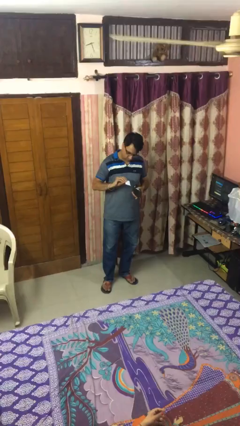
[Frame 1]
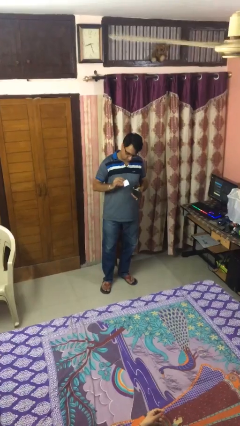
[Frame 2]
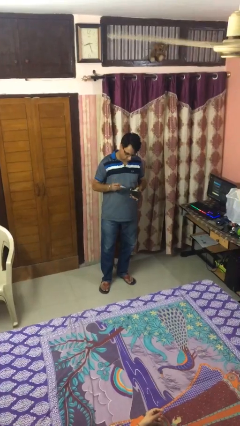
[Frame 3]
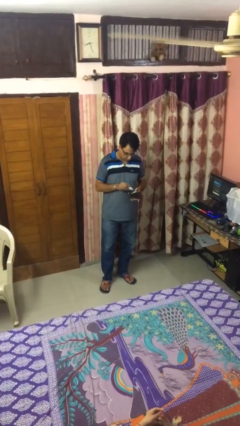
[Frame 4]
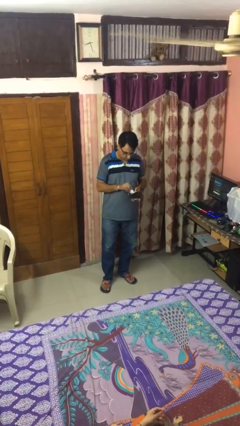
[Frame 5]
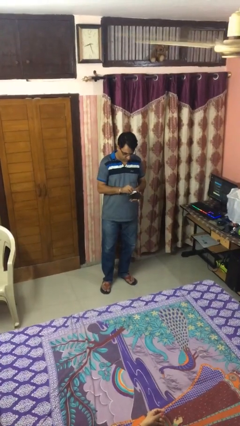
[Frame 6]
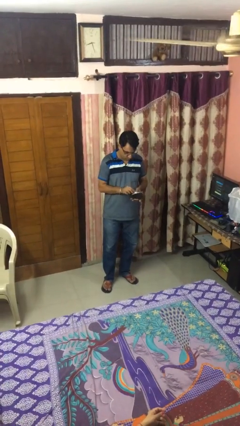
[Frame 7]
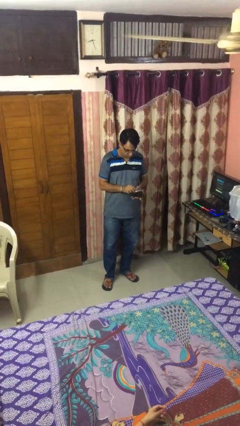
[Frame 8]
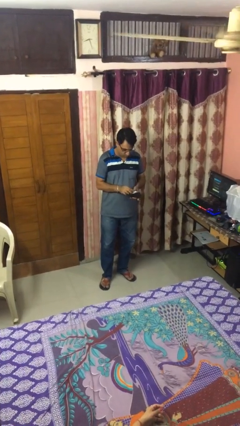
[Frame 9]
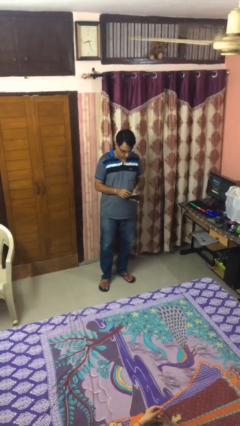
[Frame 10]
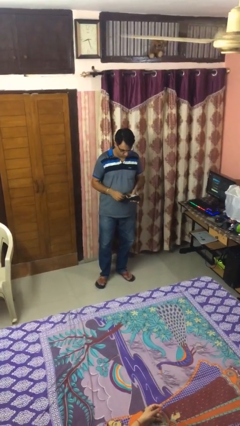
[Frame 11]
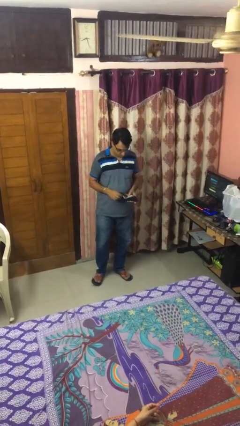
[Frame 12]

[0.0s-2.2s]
person puts object into purse

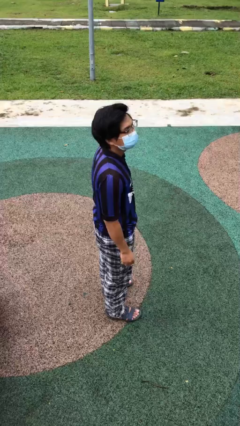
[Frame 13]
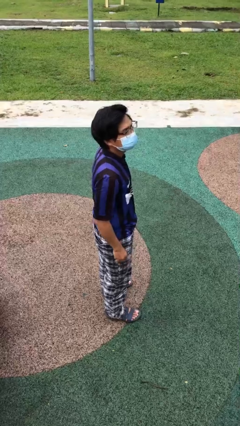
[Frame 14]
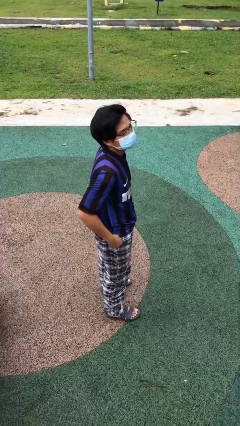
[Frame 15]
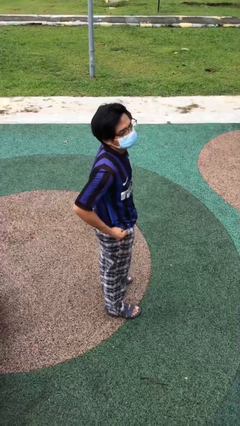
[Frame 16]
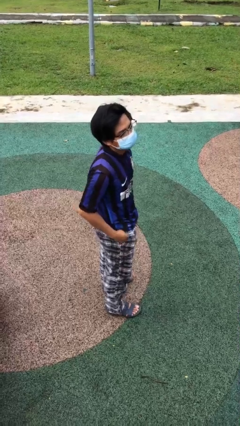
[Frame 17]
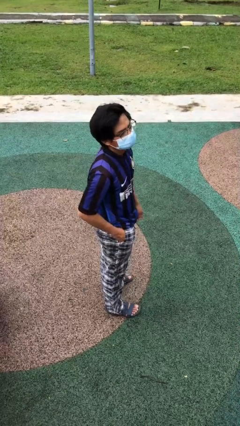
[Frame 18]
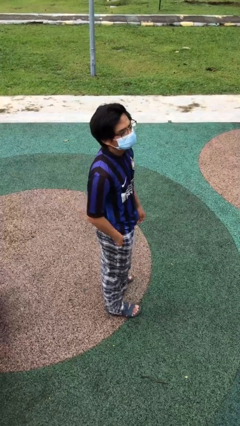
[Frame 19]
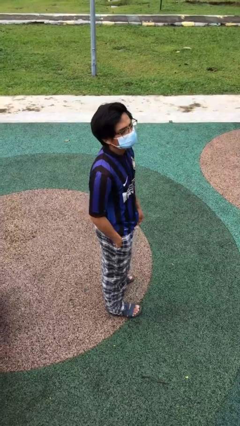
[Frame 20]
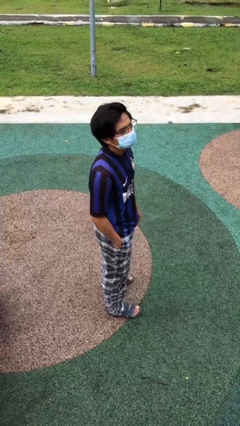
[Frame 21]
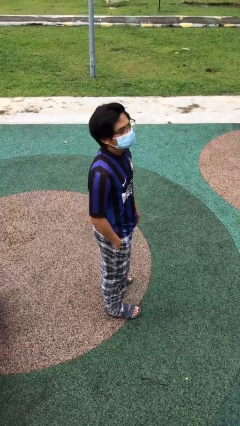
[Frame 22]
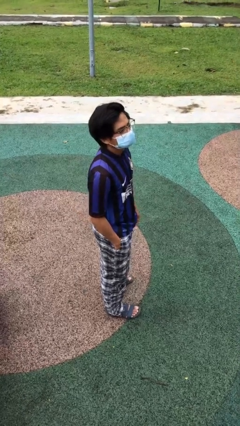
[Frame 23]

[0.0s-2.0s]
person puts hands in back pockets

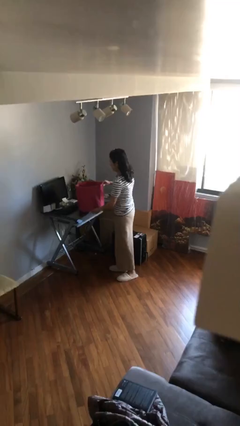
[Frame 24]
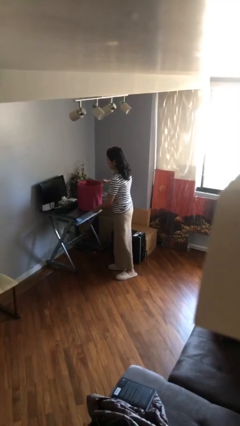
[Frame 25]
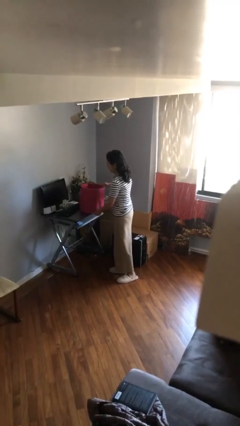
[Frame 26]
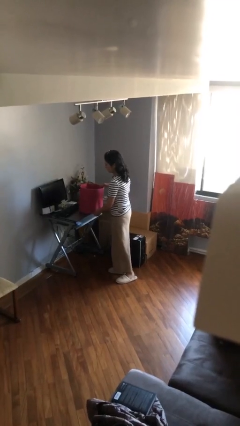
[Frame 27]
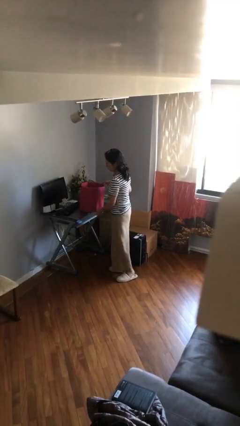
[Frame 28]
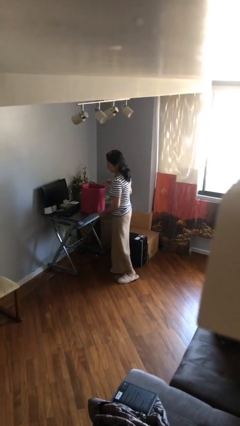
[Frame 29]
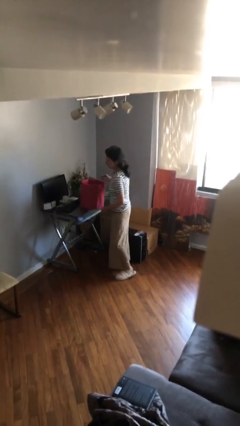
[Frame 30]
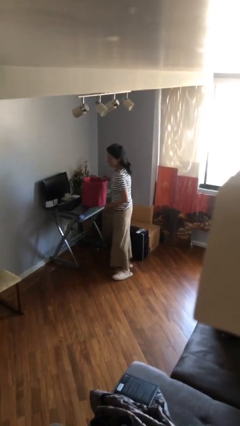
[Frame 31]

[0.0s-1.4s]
person puts down object on table

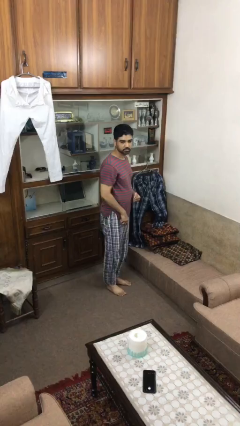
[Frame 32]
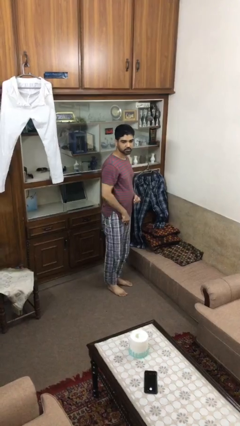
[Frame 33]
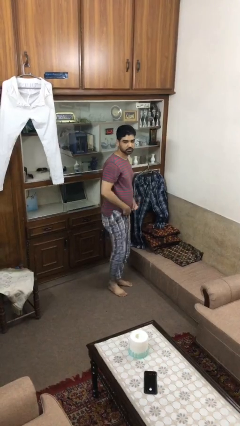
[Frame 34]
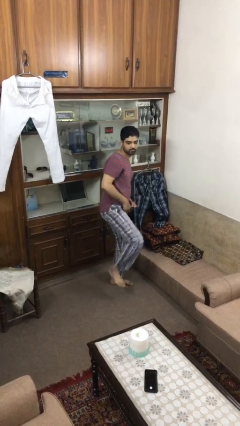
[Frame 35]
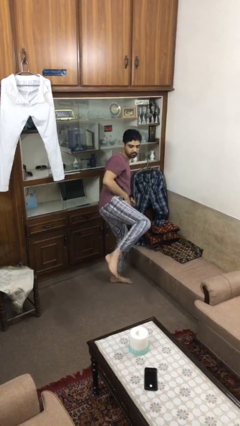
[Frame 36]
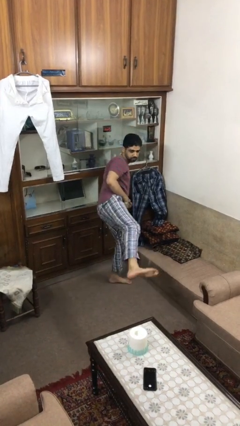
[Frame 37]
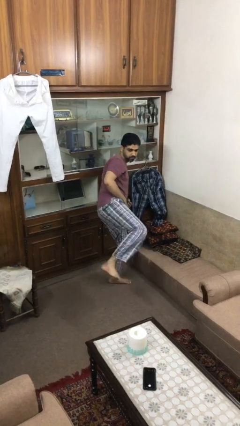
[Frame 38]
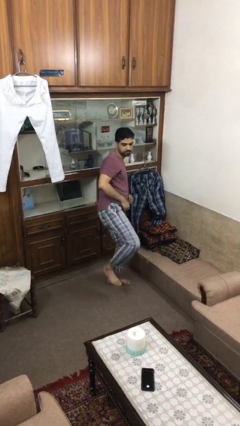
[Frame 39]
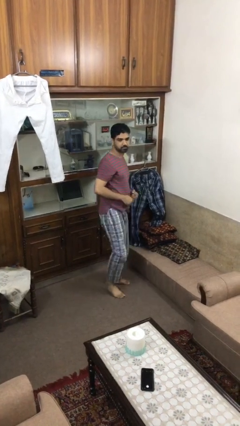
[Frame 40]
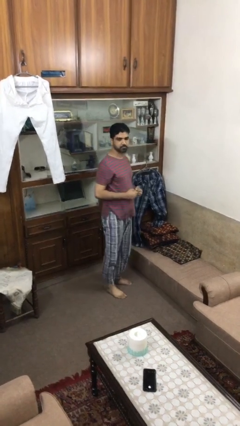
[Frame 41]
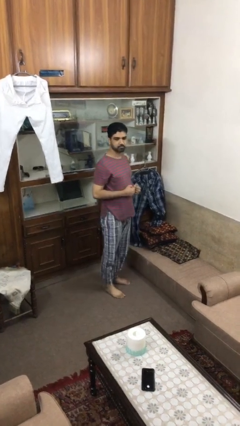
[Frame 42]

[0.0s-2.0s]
person karate kicks

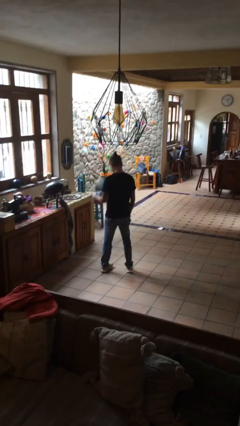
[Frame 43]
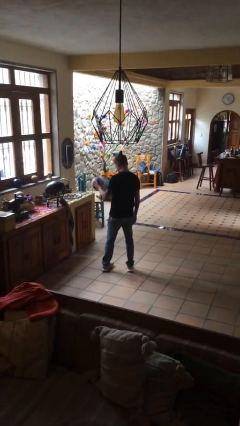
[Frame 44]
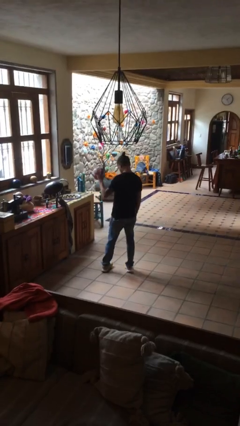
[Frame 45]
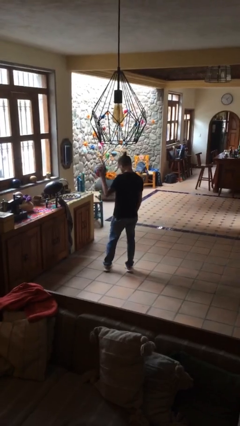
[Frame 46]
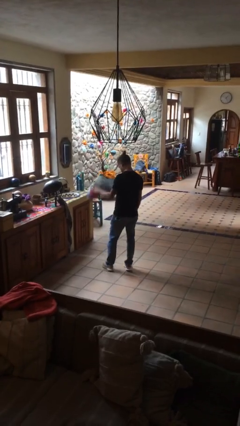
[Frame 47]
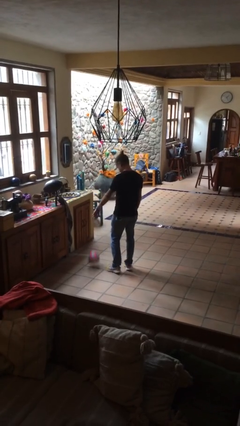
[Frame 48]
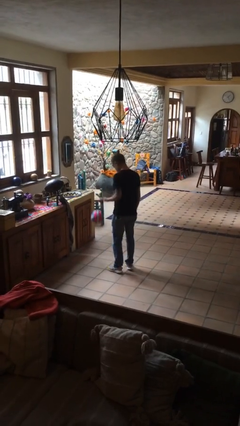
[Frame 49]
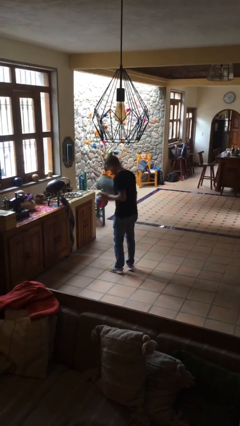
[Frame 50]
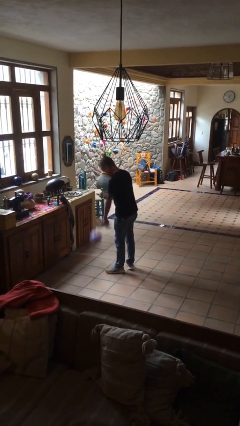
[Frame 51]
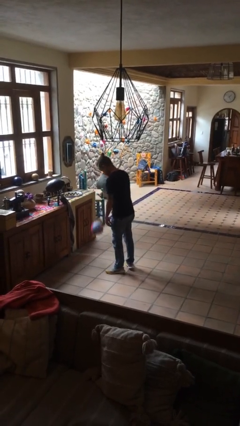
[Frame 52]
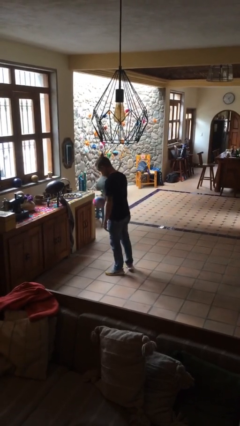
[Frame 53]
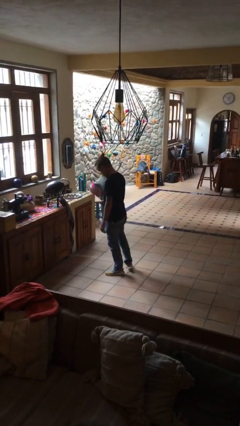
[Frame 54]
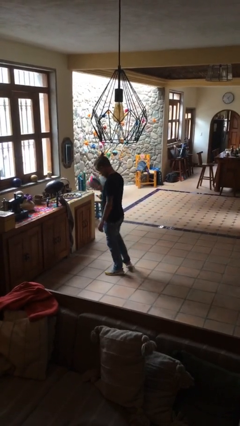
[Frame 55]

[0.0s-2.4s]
person bounces ball on floor

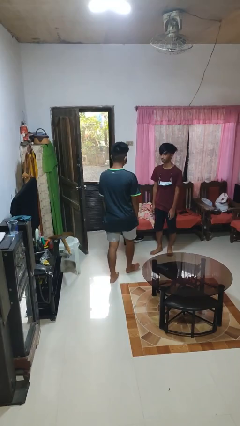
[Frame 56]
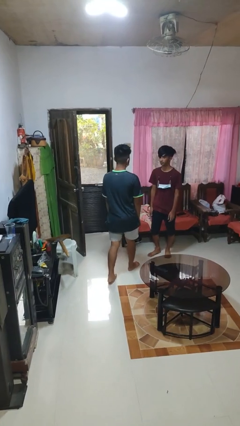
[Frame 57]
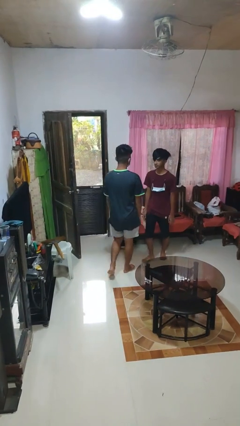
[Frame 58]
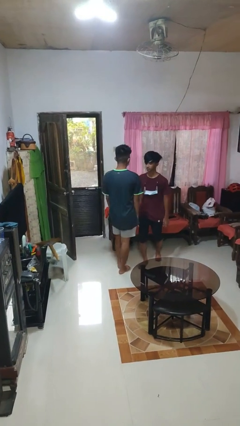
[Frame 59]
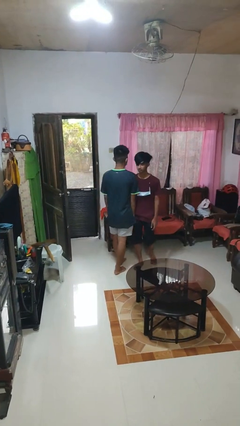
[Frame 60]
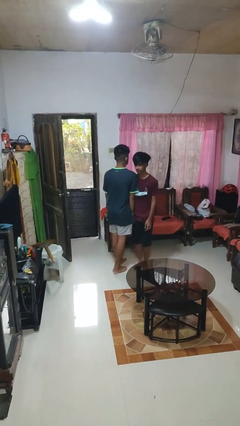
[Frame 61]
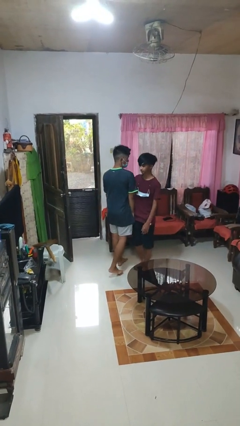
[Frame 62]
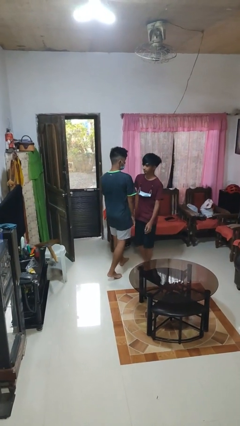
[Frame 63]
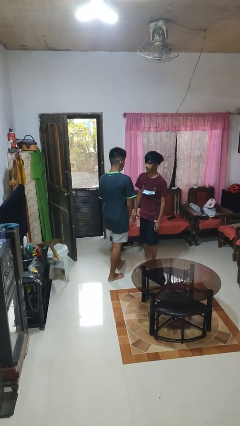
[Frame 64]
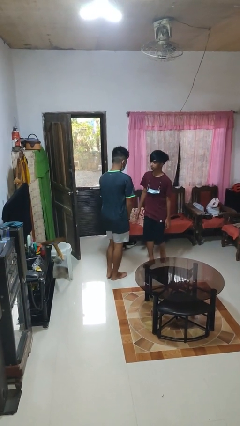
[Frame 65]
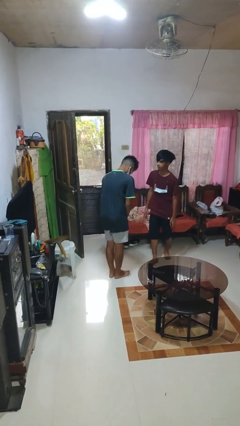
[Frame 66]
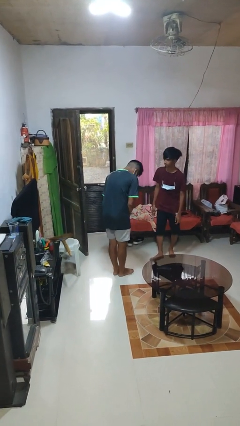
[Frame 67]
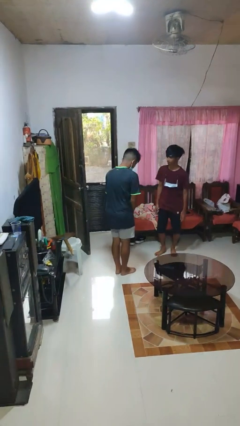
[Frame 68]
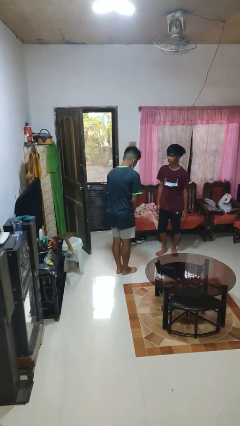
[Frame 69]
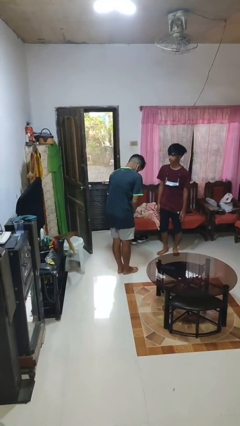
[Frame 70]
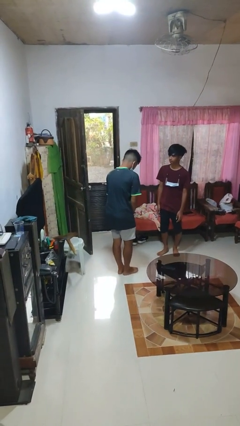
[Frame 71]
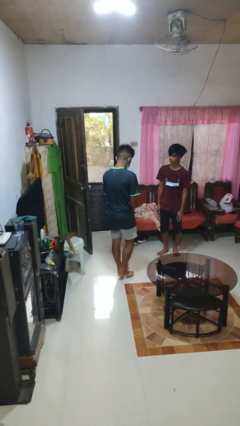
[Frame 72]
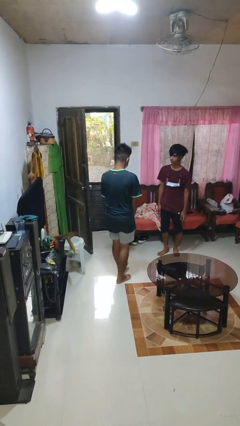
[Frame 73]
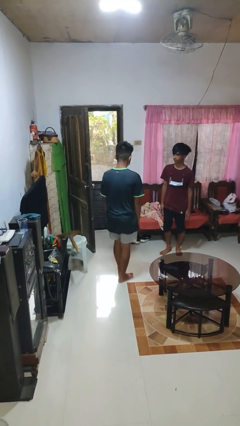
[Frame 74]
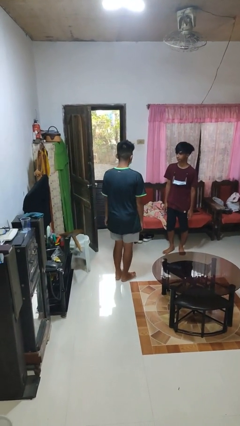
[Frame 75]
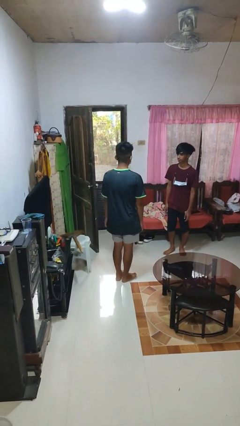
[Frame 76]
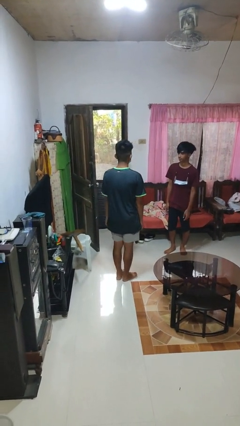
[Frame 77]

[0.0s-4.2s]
person bumps into person

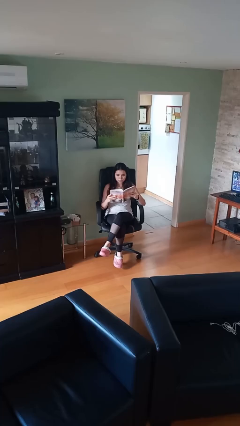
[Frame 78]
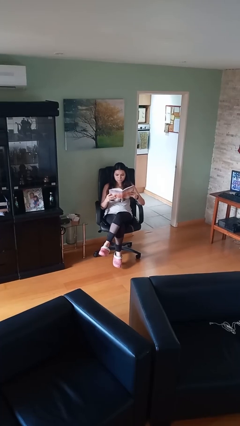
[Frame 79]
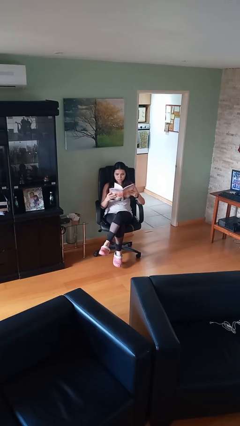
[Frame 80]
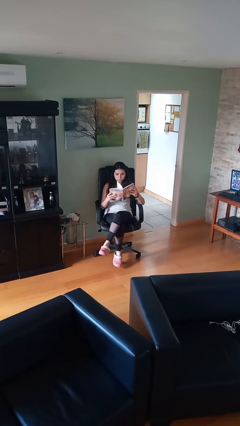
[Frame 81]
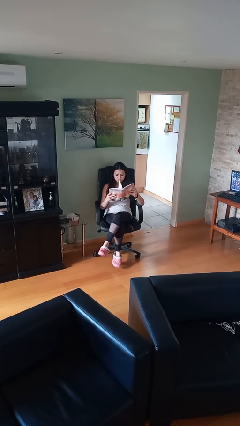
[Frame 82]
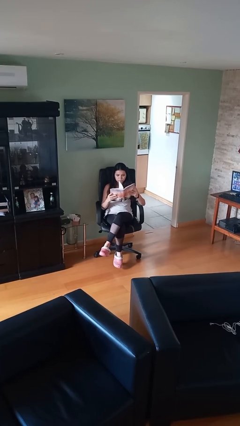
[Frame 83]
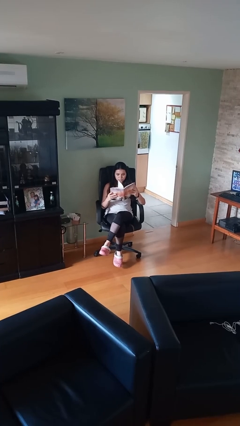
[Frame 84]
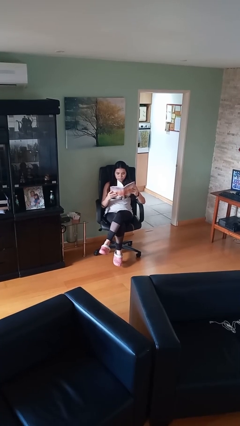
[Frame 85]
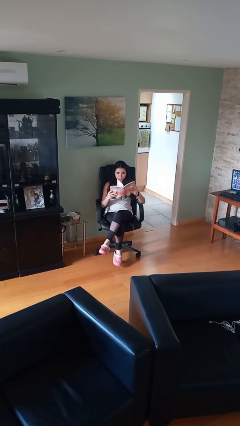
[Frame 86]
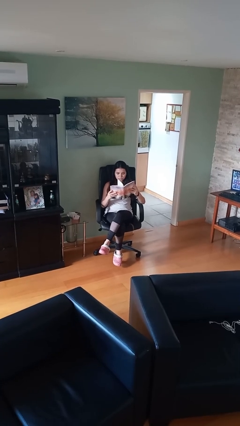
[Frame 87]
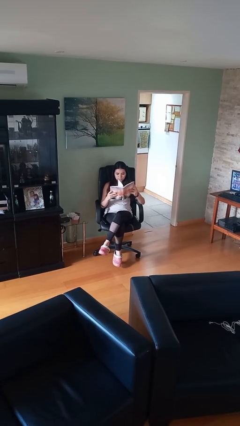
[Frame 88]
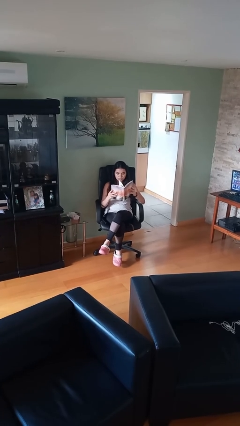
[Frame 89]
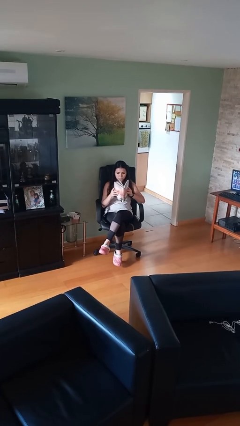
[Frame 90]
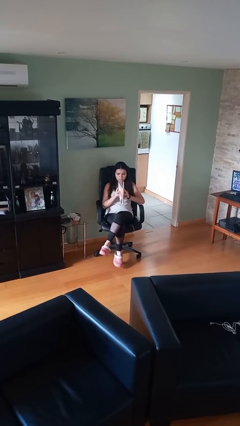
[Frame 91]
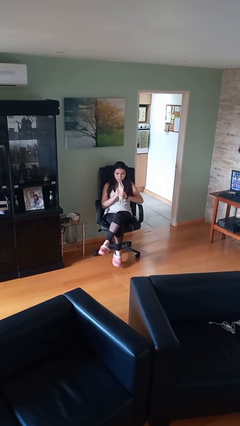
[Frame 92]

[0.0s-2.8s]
person reads document
